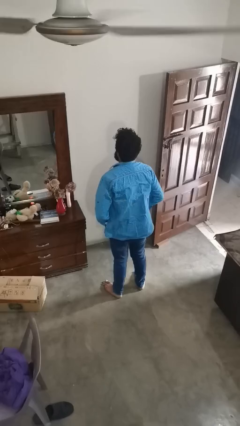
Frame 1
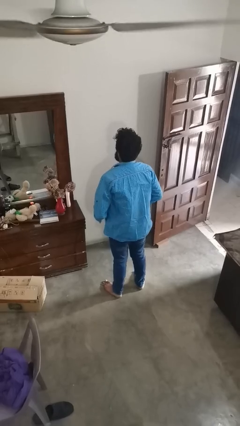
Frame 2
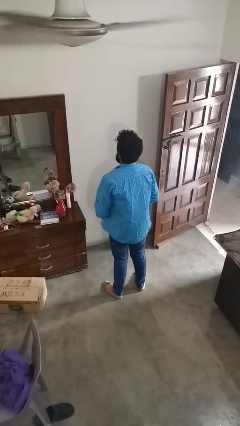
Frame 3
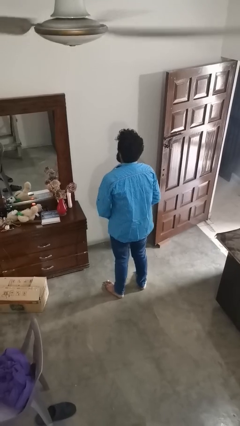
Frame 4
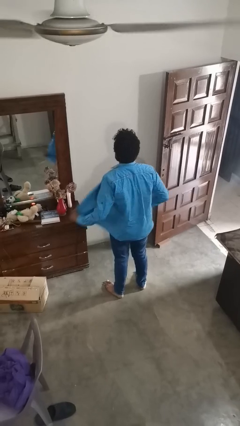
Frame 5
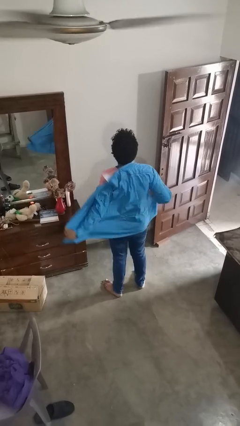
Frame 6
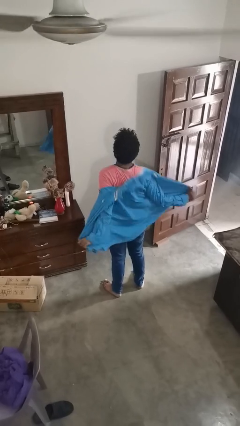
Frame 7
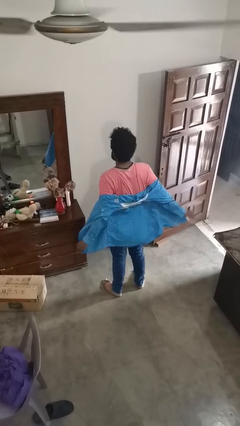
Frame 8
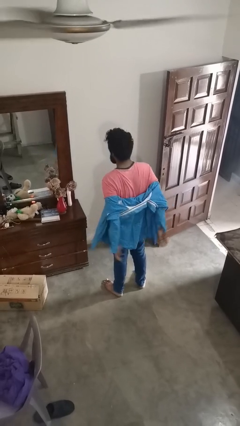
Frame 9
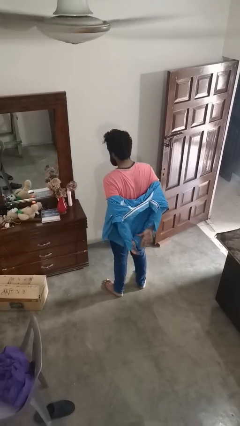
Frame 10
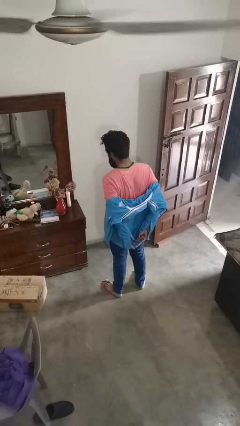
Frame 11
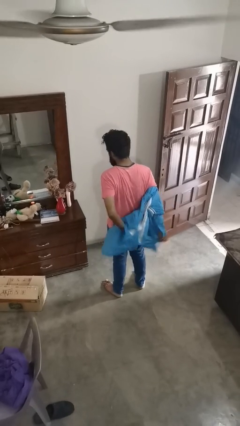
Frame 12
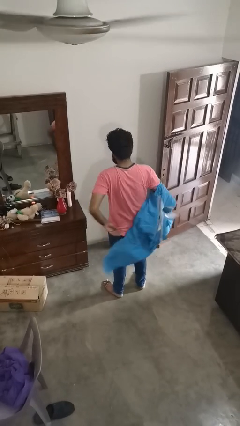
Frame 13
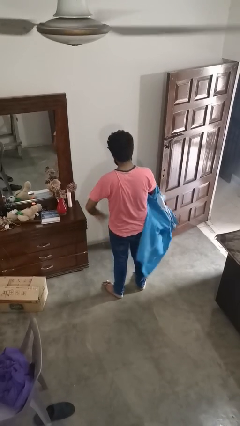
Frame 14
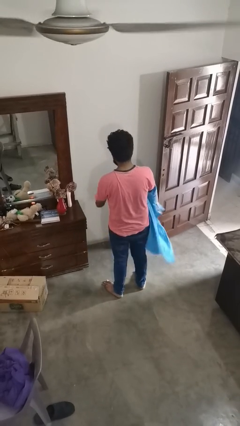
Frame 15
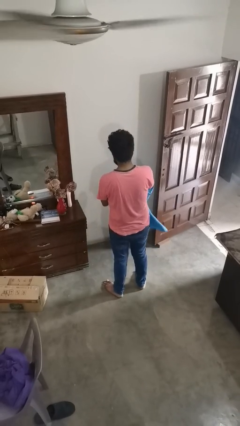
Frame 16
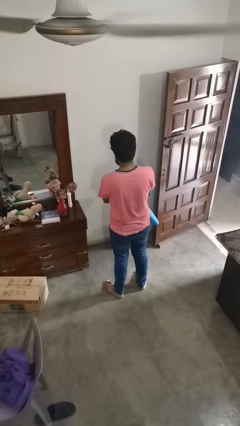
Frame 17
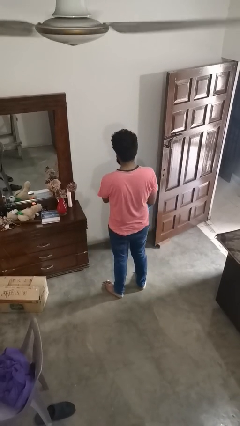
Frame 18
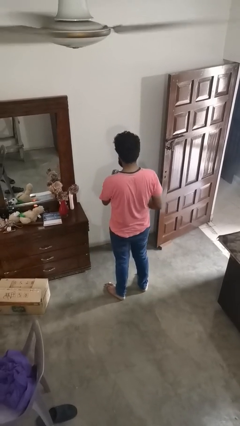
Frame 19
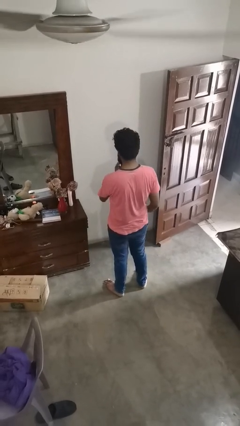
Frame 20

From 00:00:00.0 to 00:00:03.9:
person takes off shirt

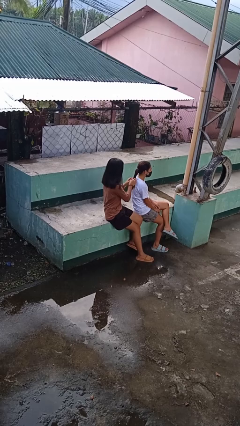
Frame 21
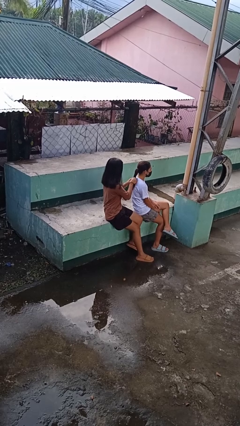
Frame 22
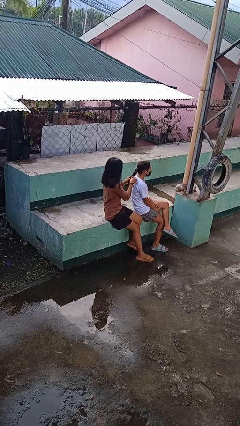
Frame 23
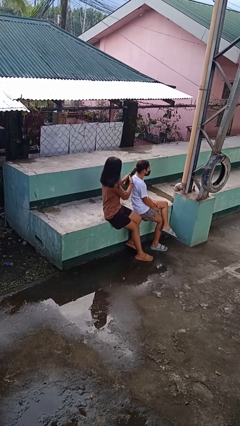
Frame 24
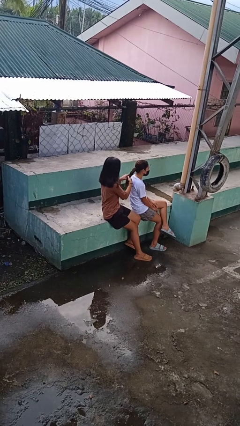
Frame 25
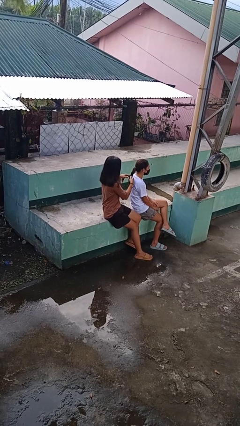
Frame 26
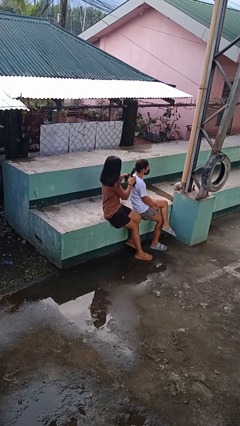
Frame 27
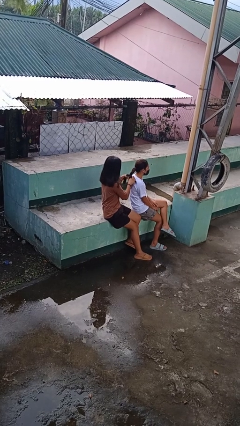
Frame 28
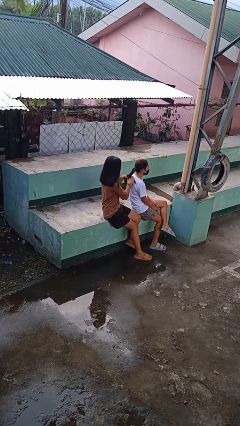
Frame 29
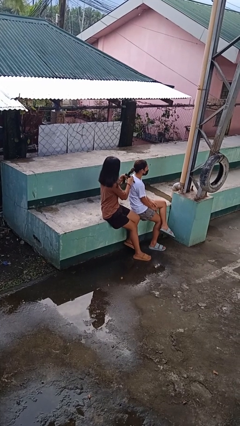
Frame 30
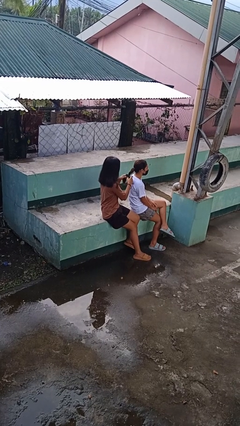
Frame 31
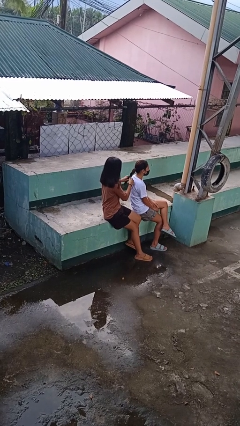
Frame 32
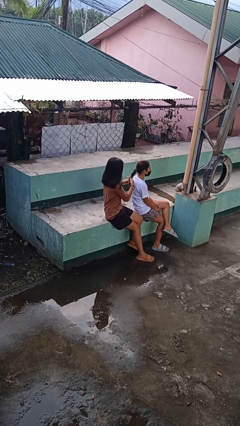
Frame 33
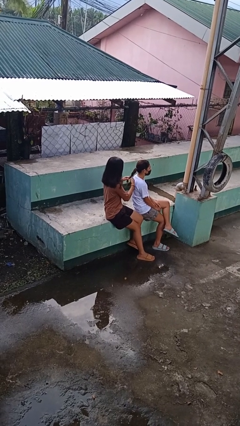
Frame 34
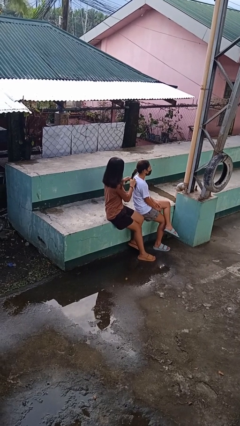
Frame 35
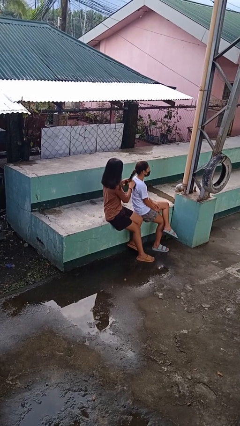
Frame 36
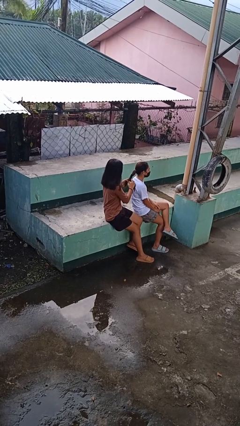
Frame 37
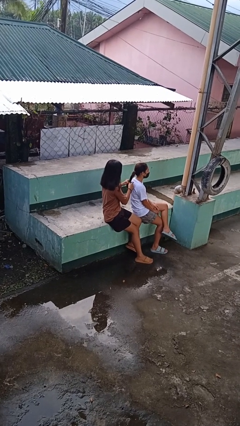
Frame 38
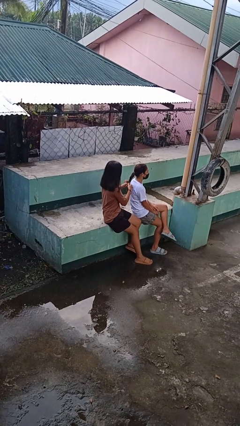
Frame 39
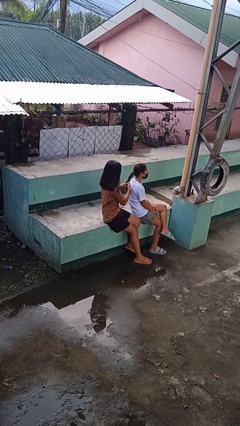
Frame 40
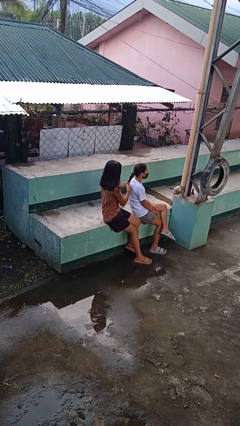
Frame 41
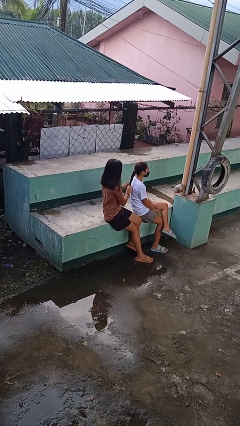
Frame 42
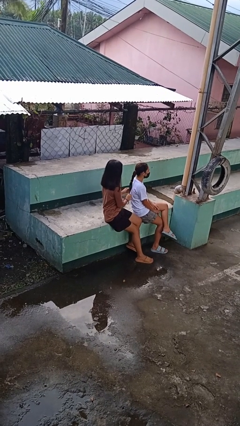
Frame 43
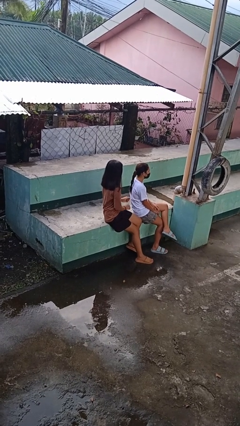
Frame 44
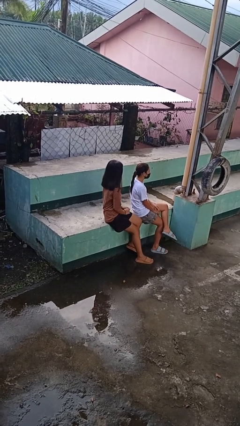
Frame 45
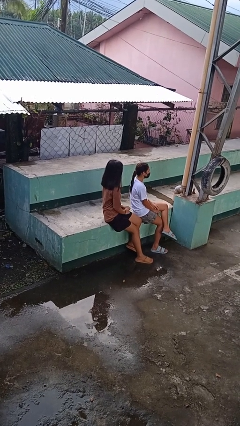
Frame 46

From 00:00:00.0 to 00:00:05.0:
person braids hair of person

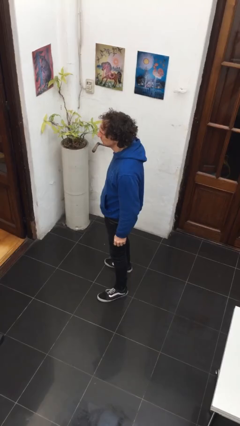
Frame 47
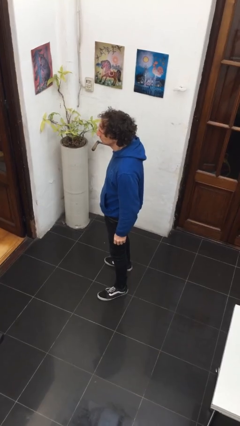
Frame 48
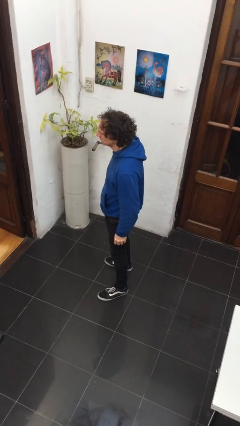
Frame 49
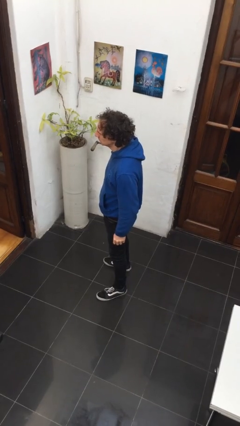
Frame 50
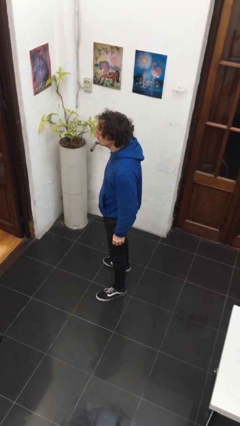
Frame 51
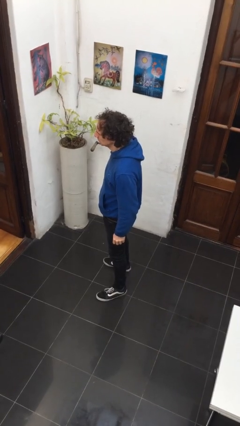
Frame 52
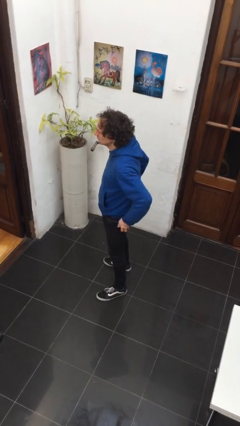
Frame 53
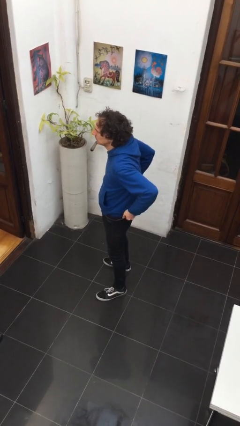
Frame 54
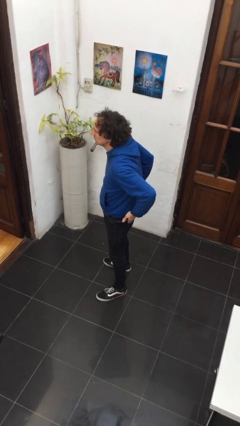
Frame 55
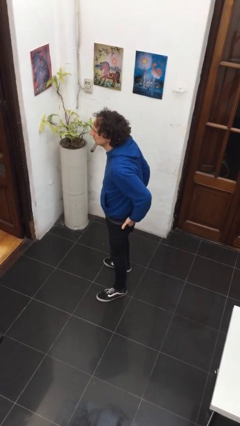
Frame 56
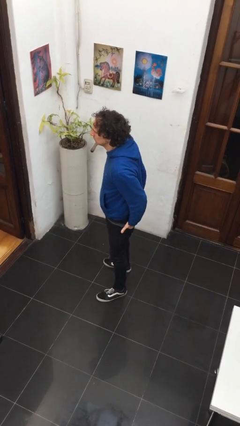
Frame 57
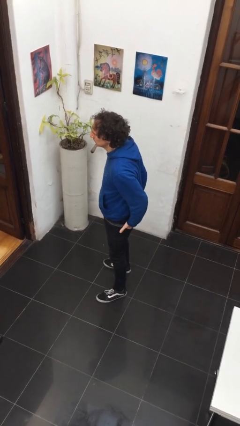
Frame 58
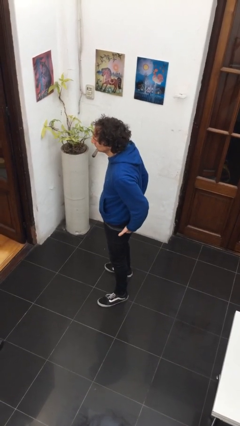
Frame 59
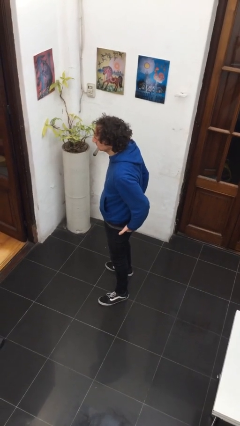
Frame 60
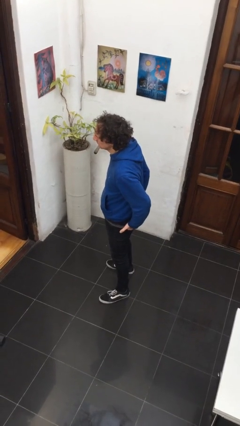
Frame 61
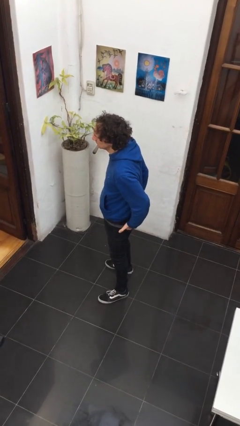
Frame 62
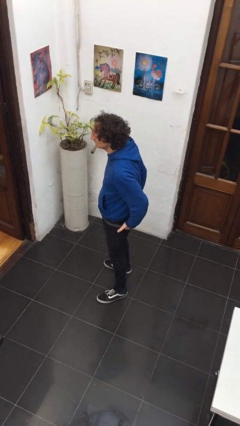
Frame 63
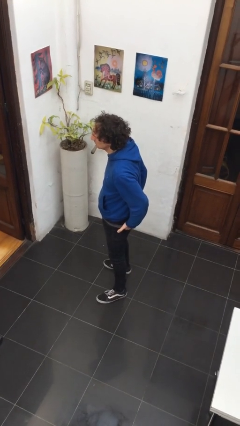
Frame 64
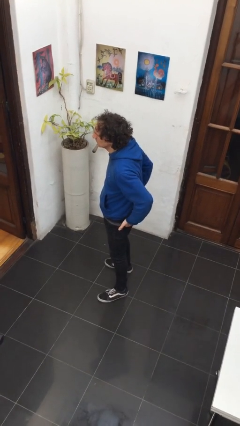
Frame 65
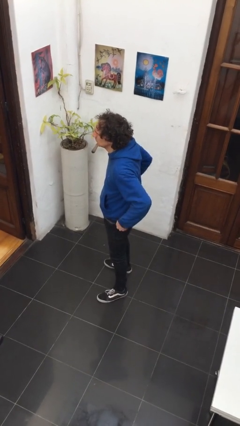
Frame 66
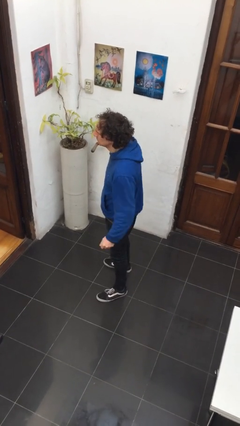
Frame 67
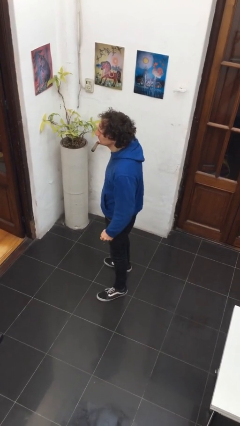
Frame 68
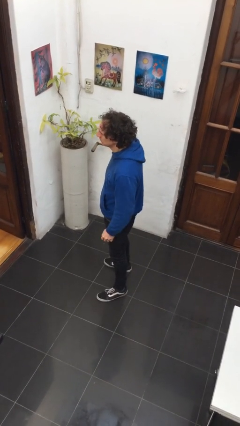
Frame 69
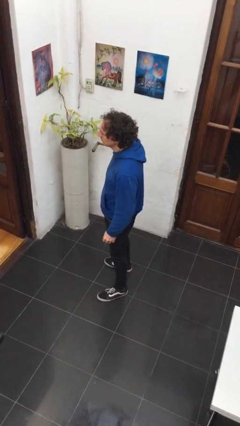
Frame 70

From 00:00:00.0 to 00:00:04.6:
person puts hands in back pockets

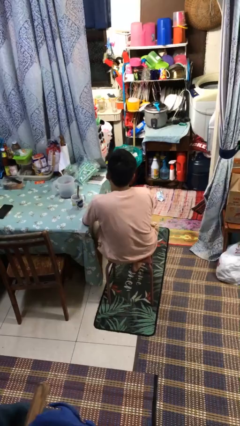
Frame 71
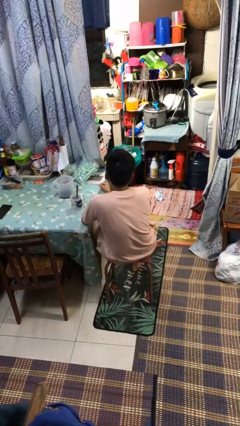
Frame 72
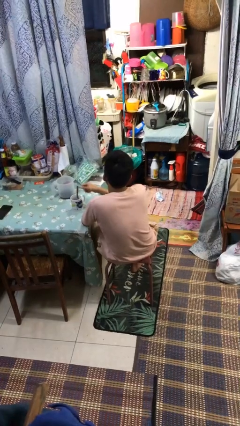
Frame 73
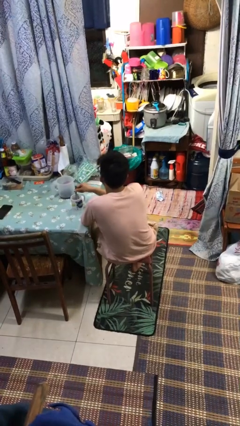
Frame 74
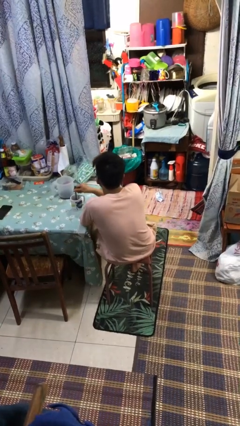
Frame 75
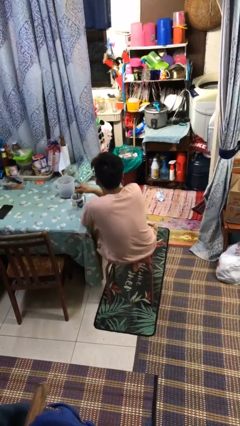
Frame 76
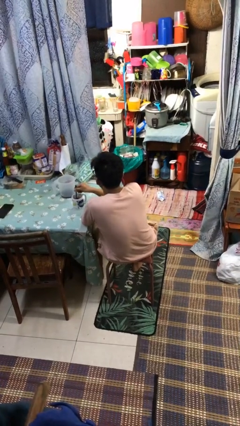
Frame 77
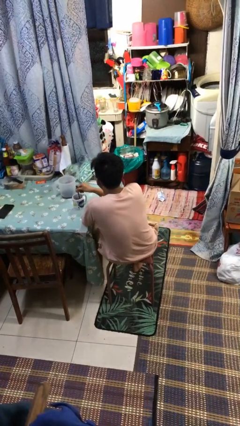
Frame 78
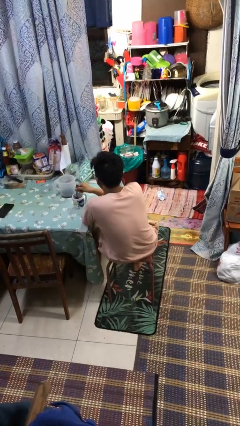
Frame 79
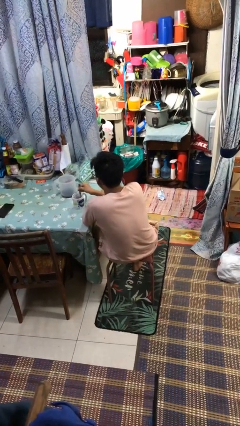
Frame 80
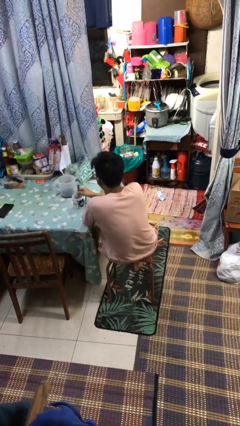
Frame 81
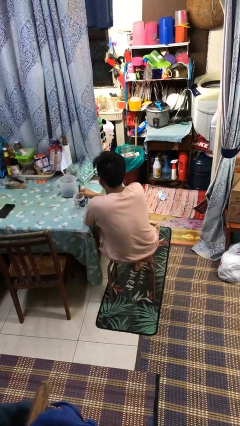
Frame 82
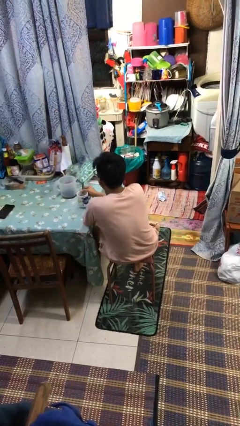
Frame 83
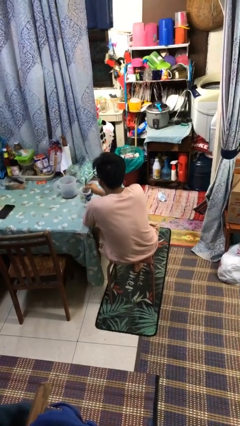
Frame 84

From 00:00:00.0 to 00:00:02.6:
person stirs mug

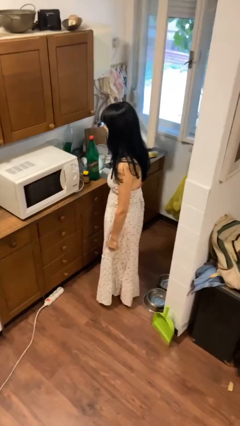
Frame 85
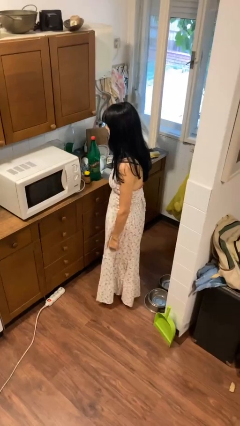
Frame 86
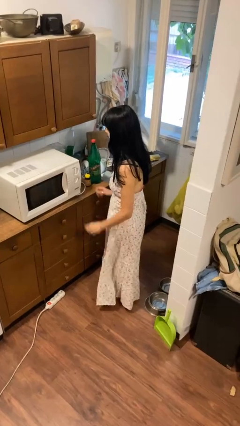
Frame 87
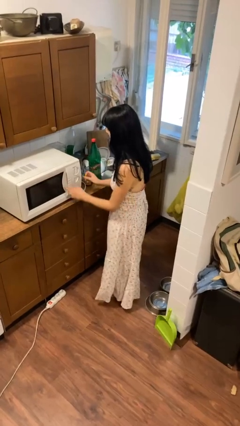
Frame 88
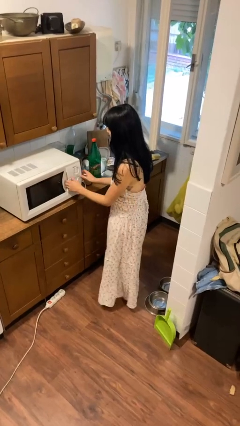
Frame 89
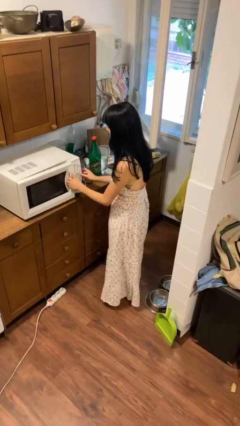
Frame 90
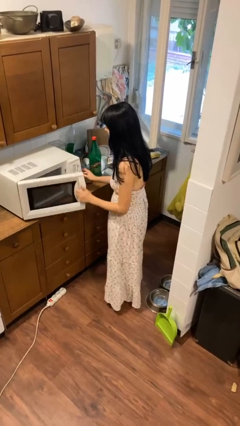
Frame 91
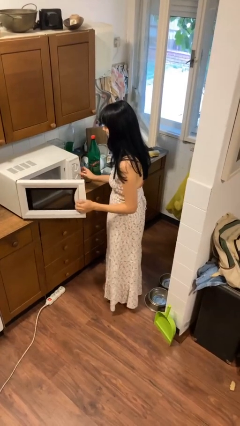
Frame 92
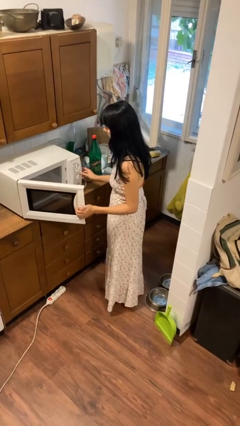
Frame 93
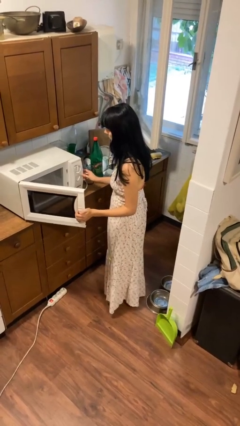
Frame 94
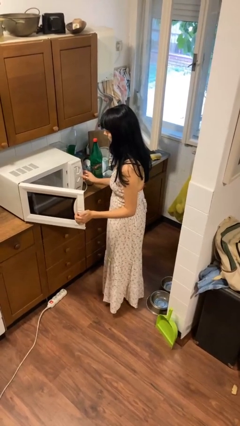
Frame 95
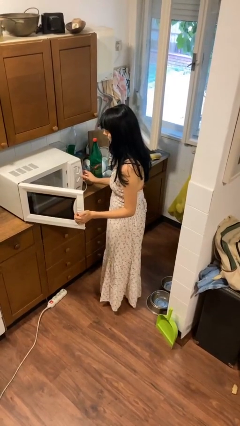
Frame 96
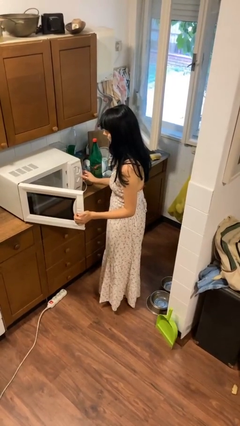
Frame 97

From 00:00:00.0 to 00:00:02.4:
person opens microwave
